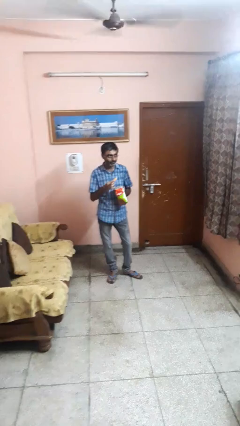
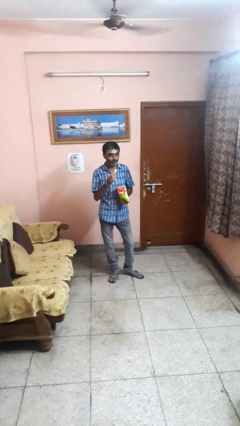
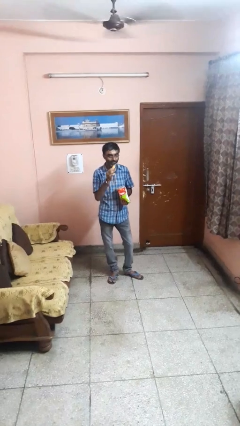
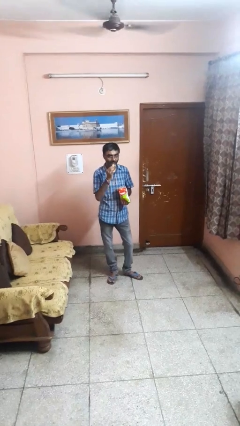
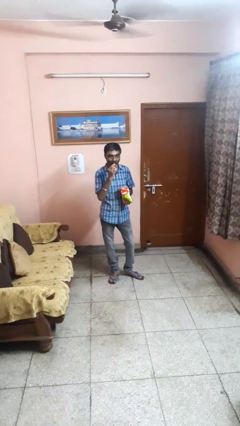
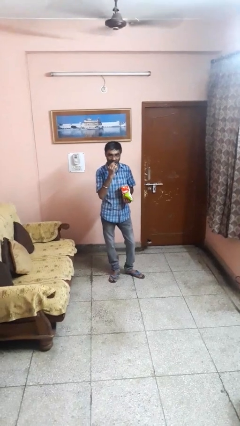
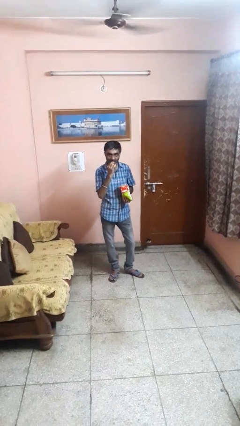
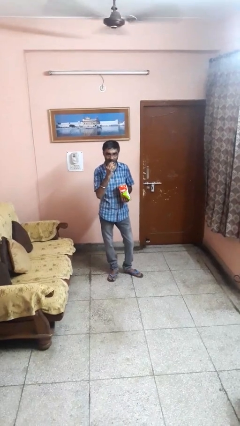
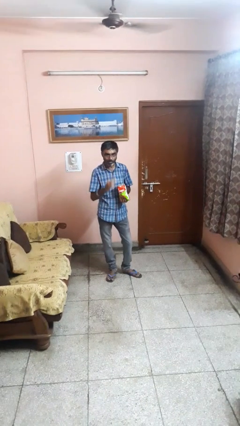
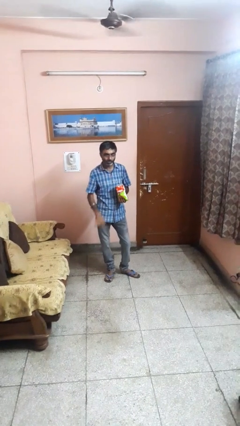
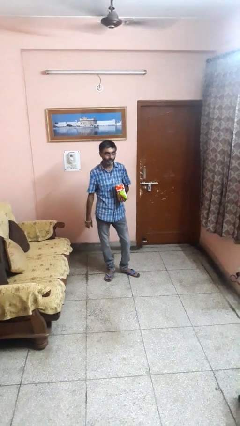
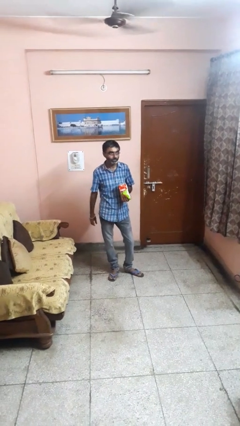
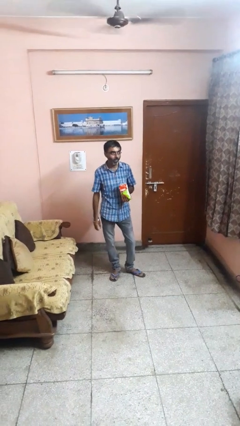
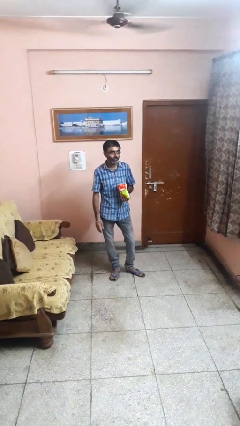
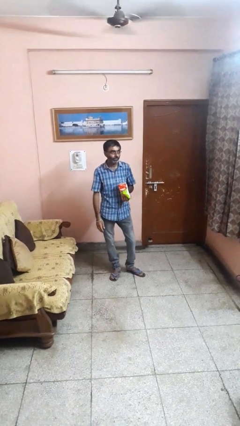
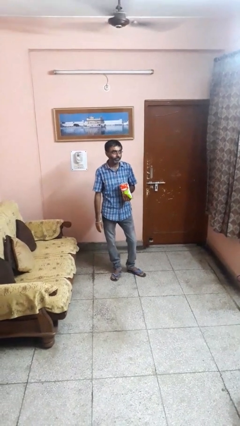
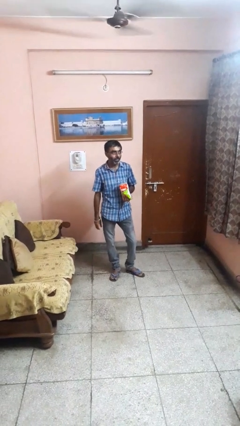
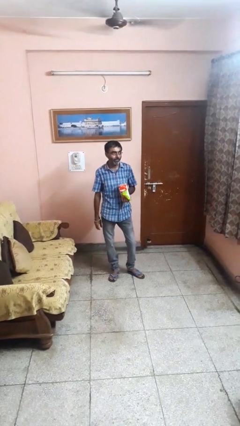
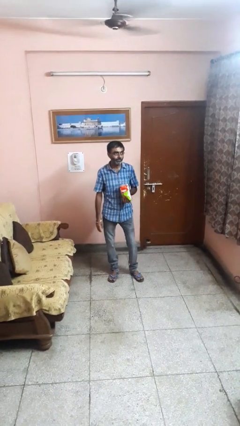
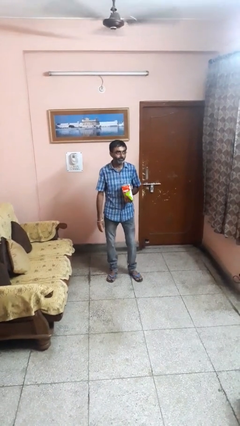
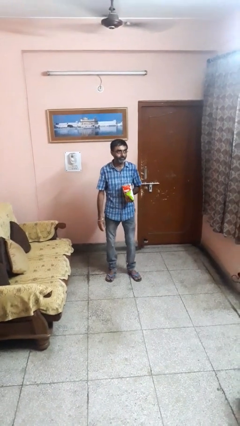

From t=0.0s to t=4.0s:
person eats snack from bag

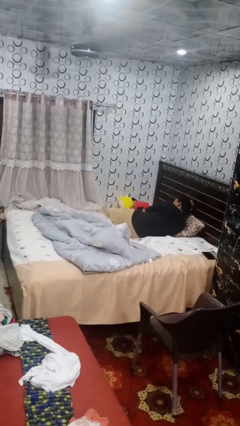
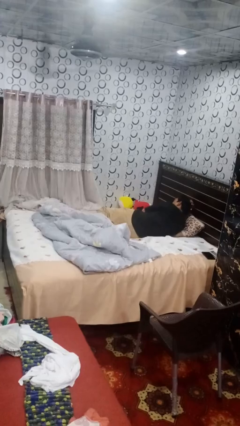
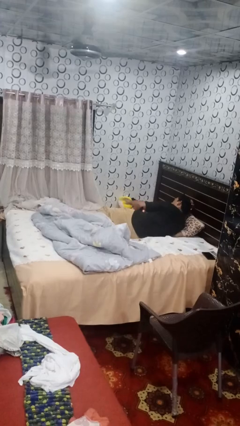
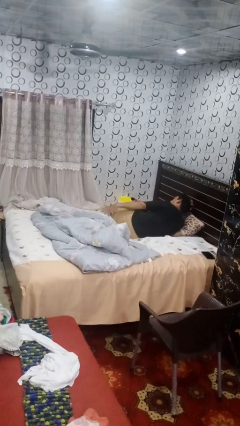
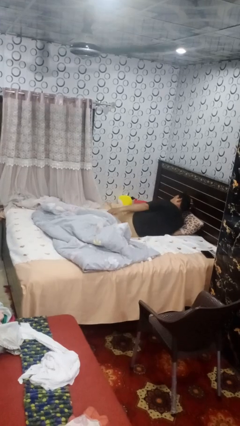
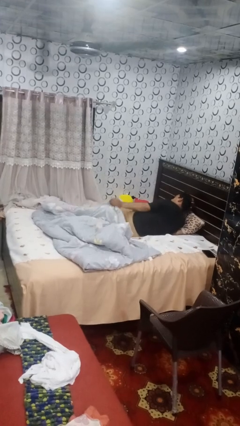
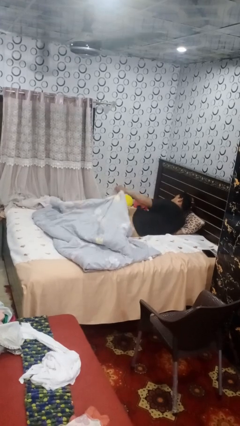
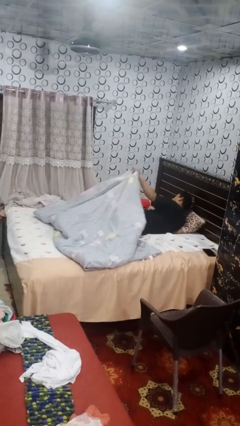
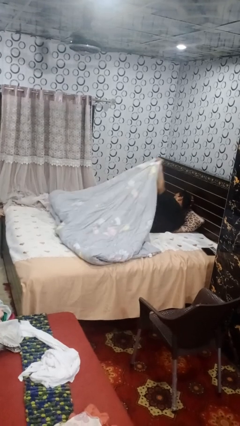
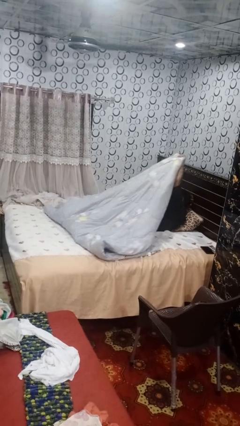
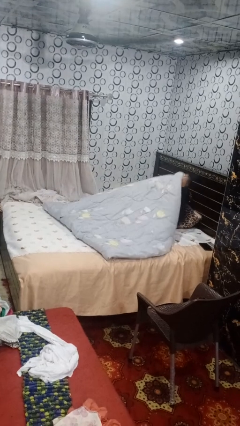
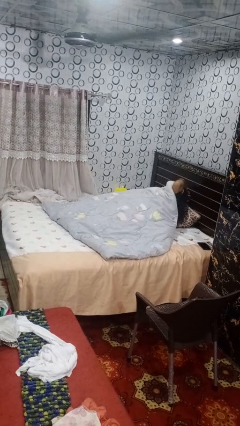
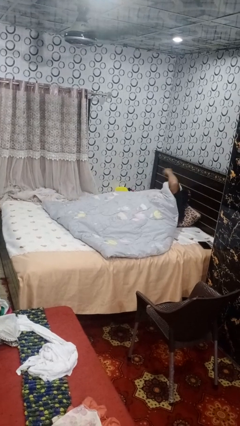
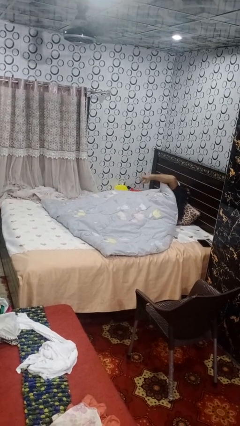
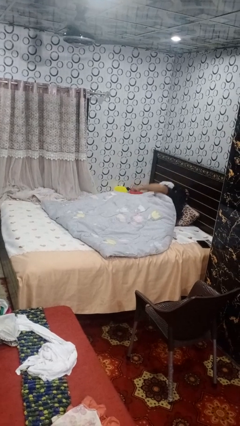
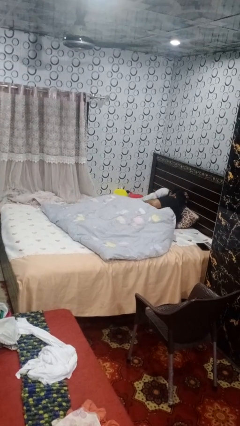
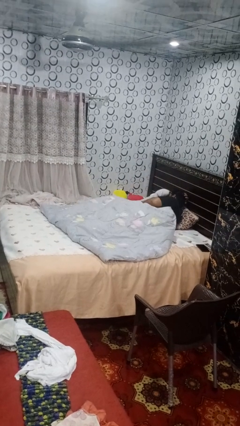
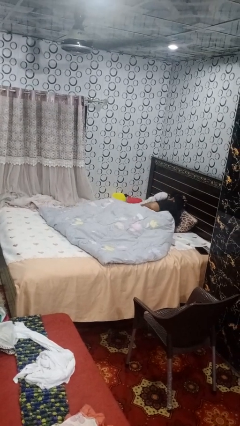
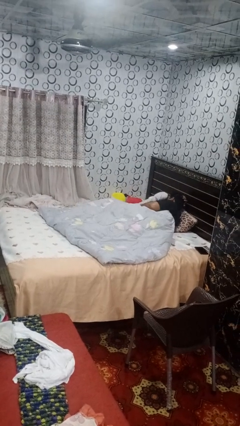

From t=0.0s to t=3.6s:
person covers with blanket

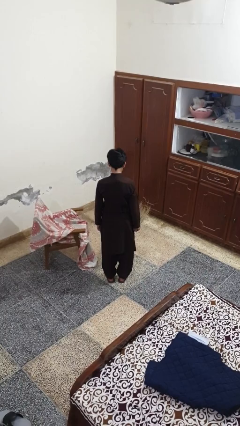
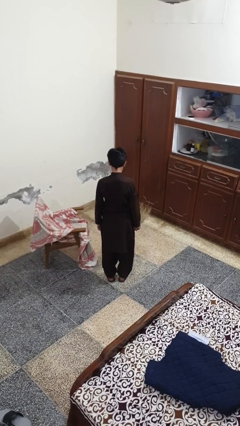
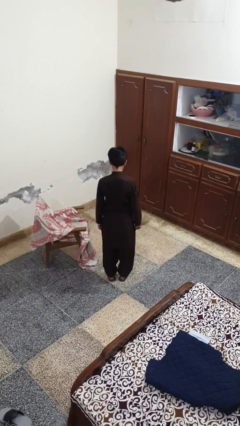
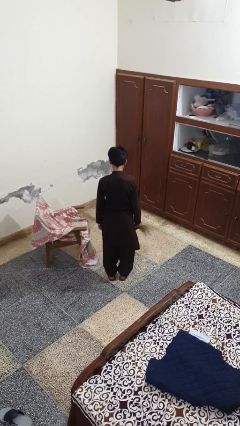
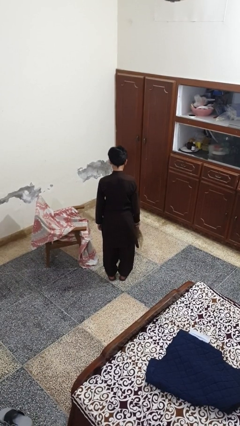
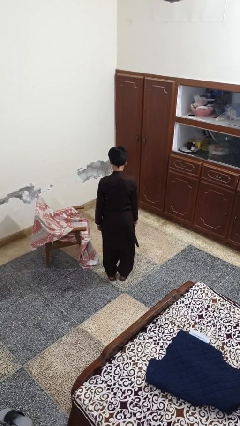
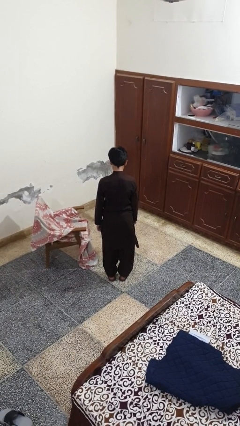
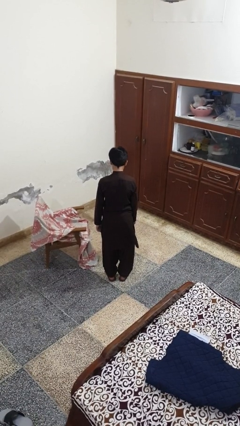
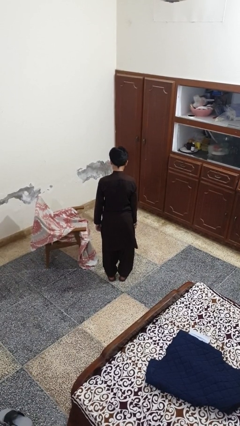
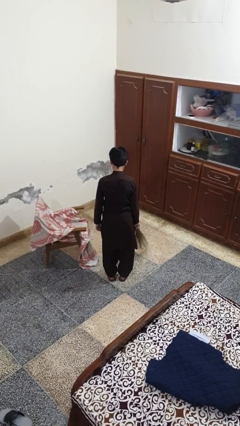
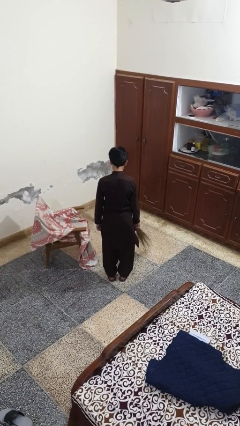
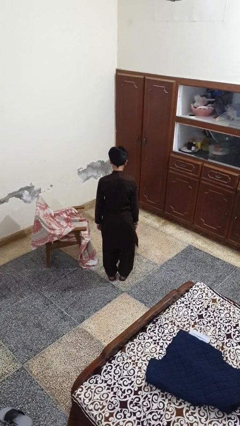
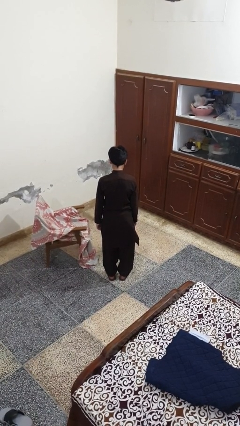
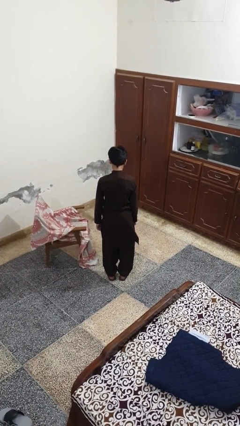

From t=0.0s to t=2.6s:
person sweeps floor

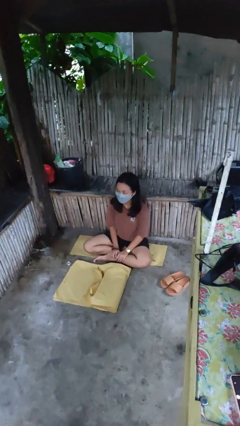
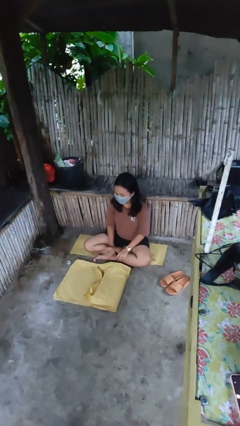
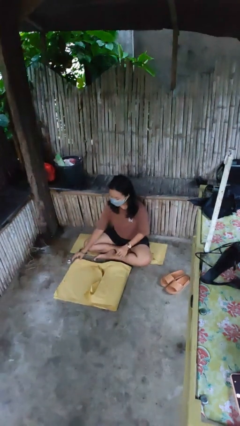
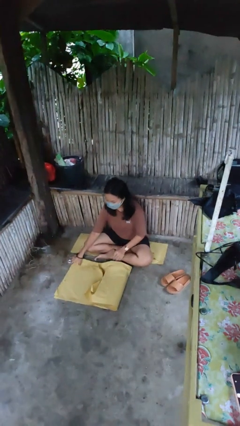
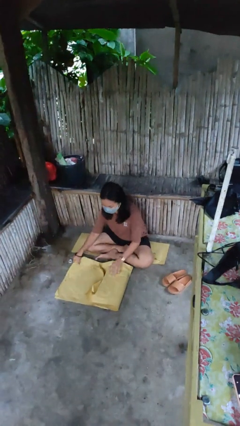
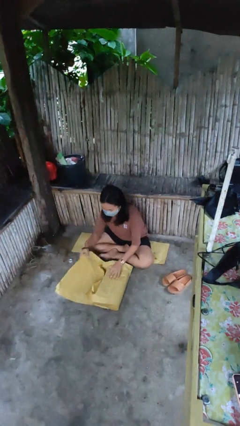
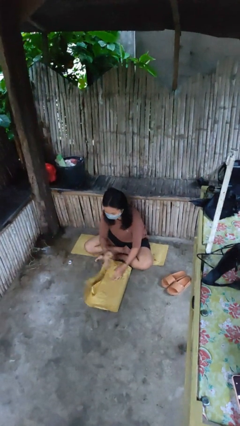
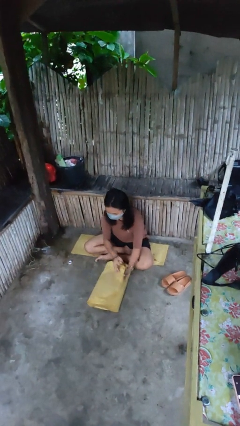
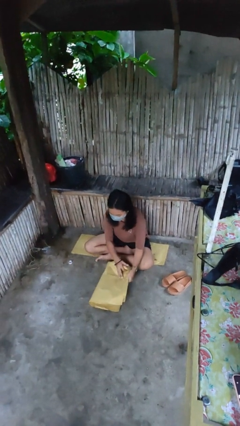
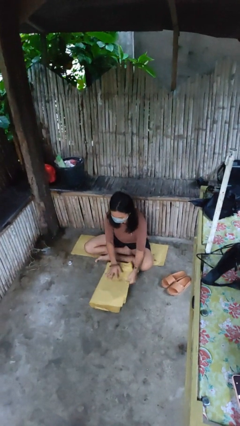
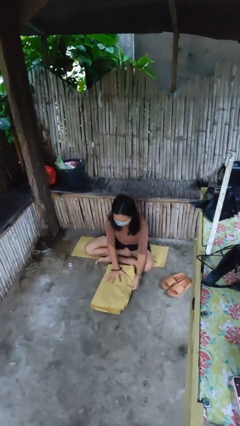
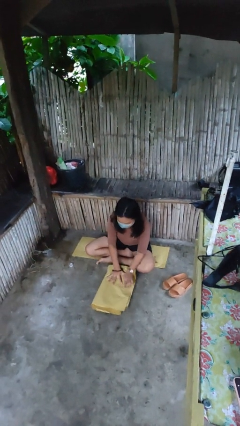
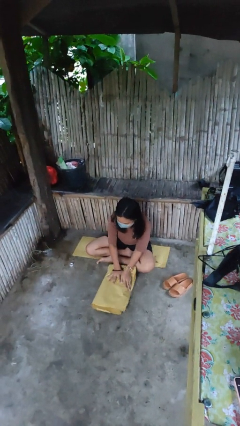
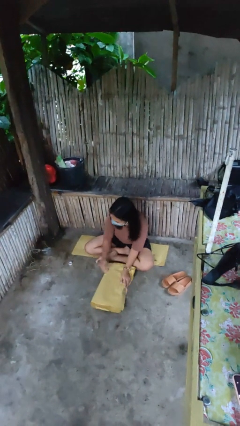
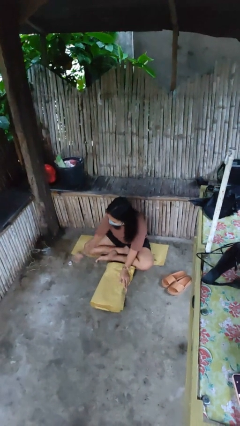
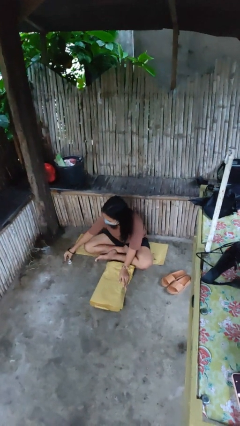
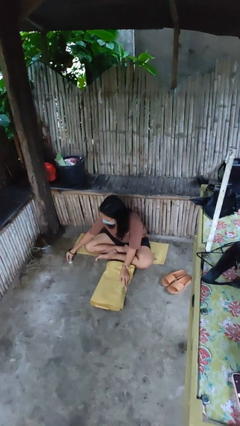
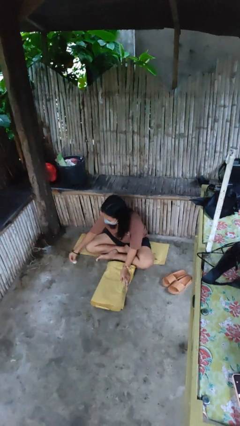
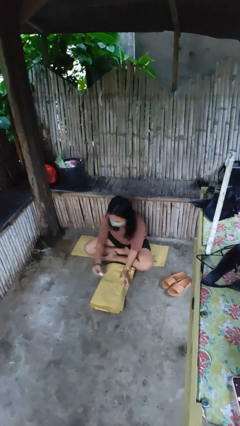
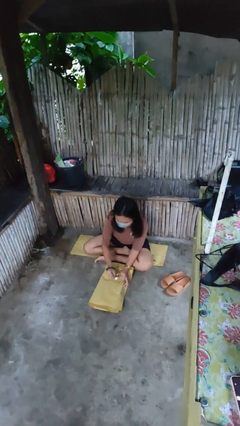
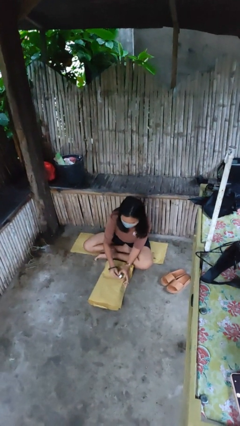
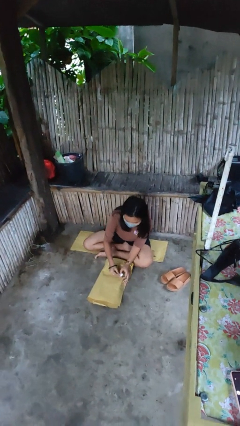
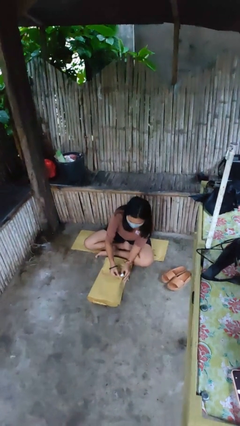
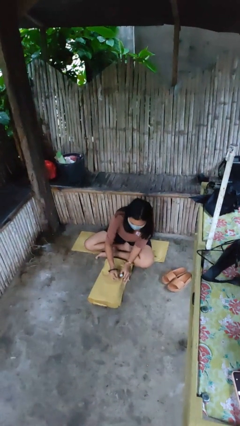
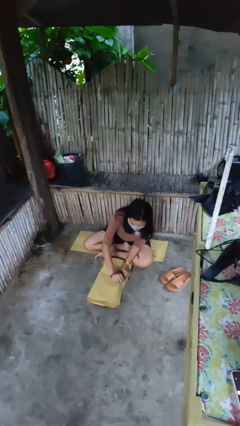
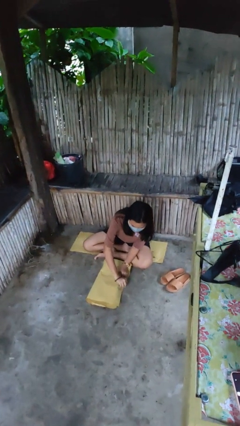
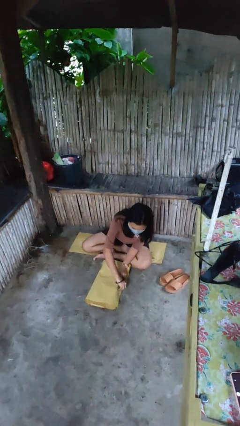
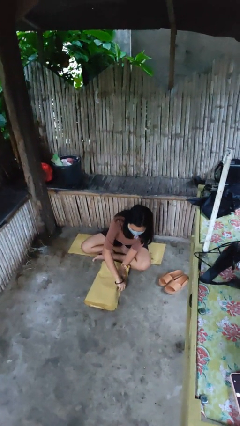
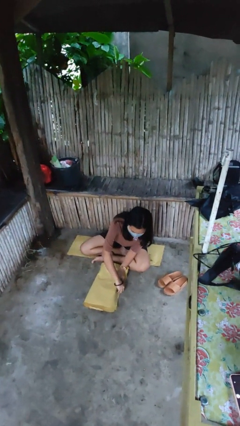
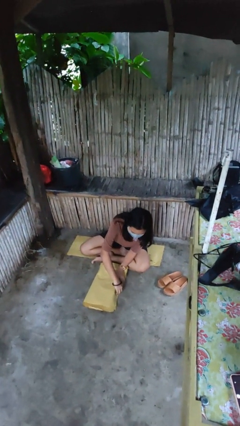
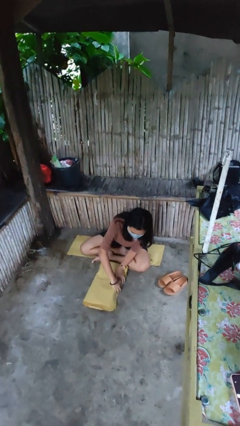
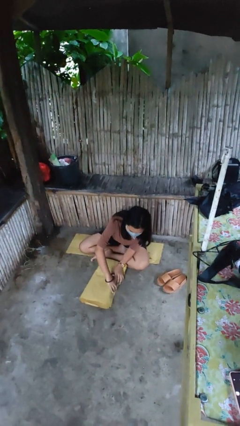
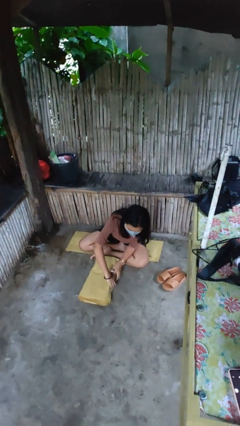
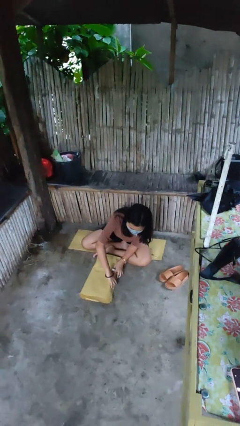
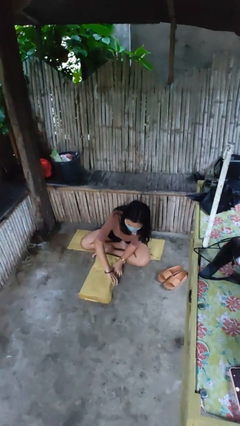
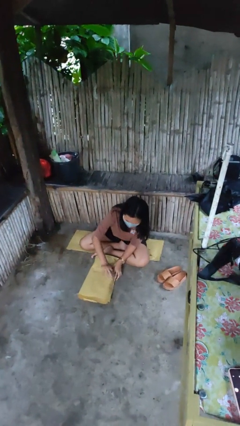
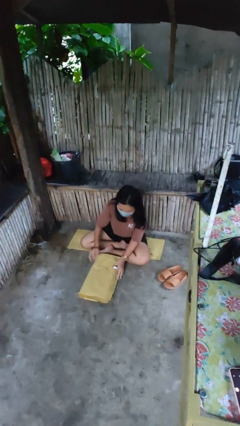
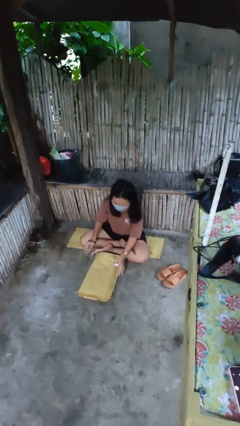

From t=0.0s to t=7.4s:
person wraps box

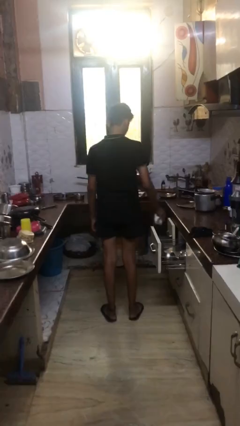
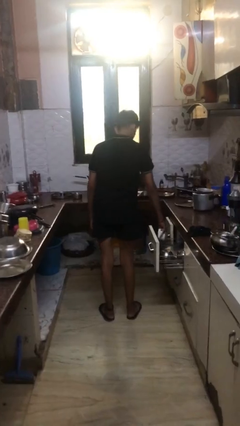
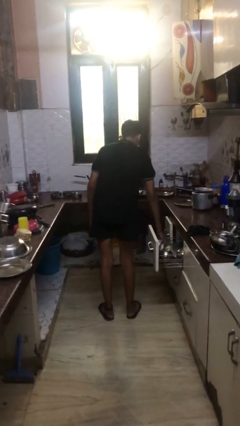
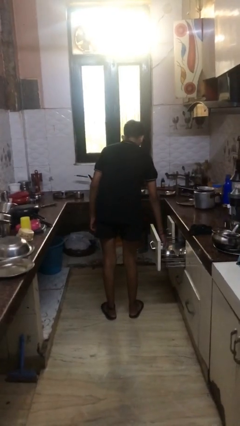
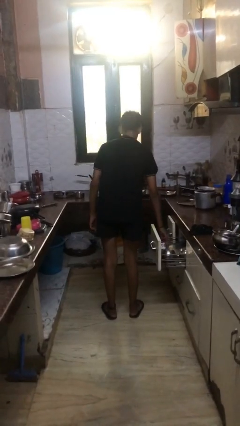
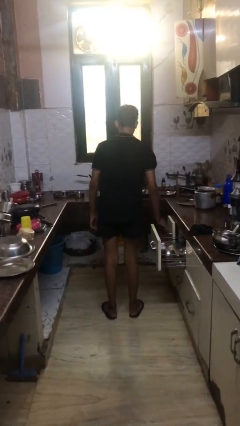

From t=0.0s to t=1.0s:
person puts object into kitchen drawer
